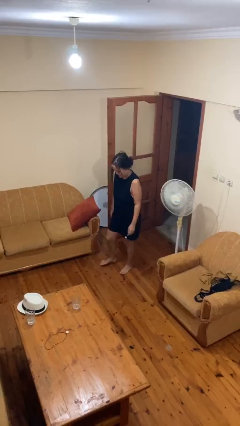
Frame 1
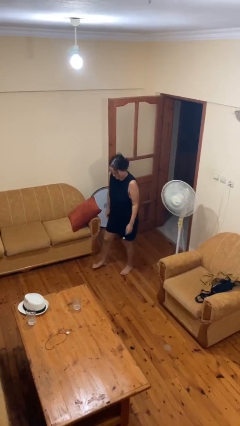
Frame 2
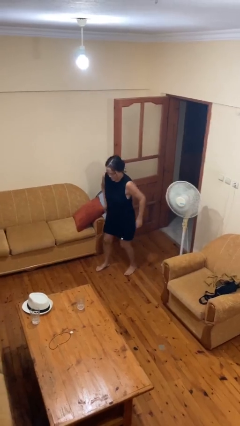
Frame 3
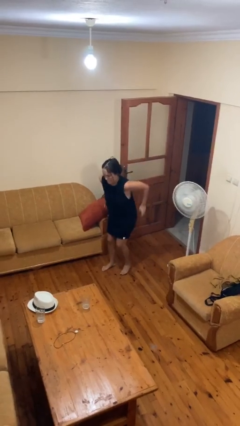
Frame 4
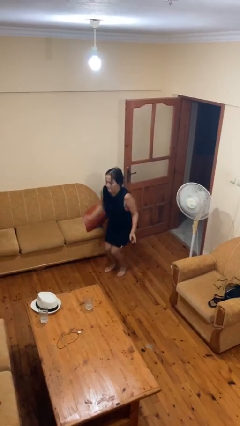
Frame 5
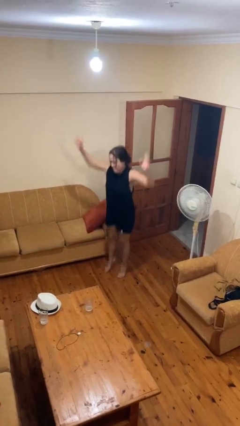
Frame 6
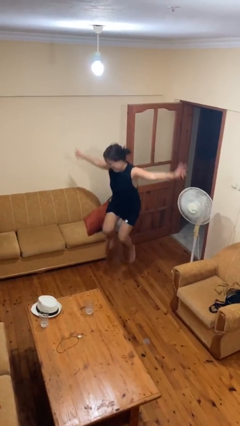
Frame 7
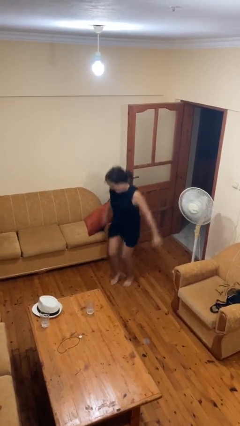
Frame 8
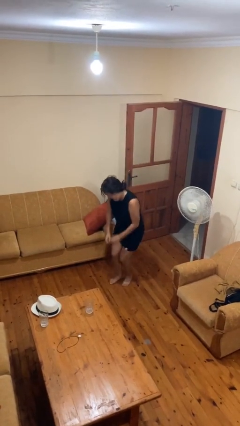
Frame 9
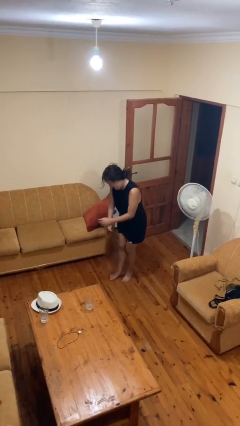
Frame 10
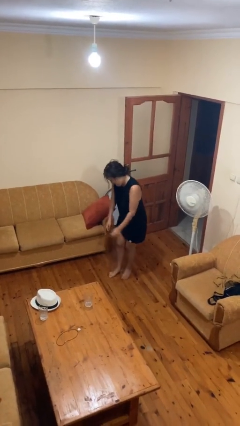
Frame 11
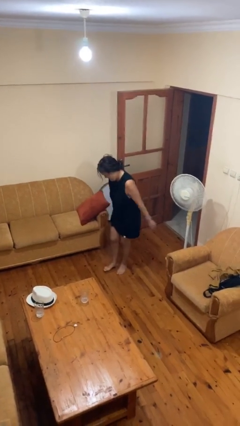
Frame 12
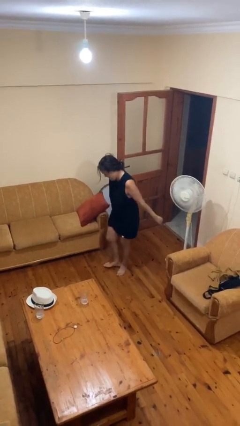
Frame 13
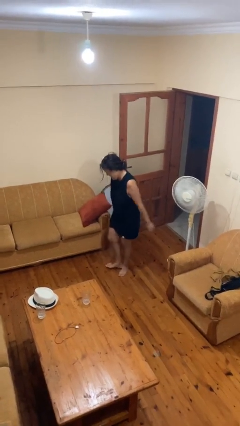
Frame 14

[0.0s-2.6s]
person jumps

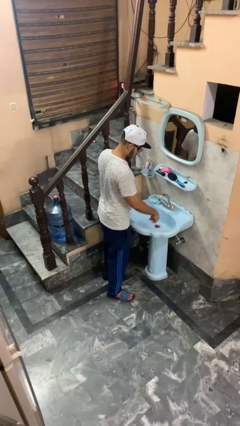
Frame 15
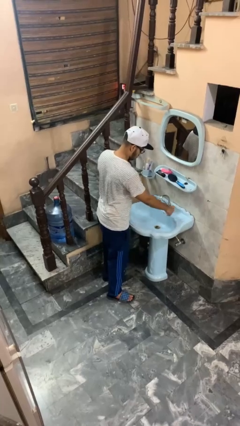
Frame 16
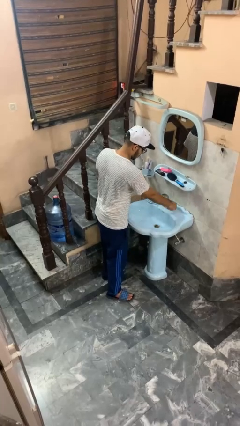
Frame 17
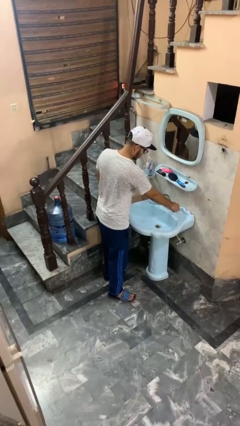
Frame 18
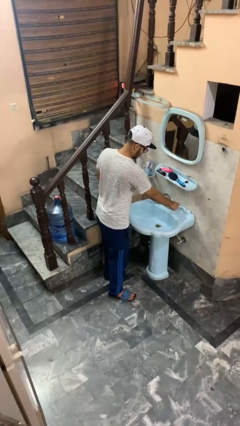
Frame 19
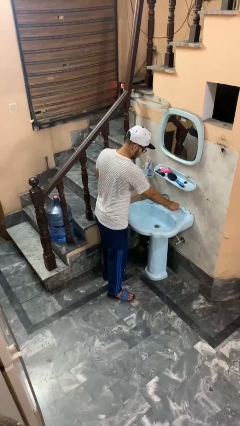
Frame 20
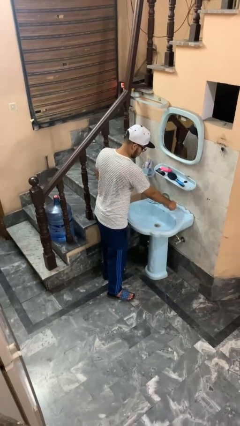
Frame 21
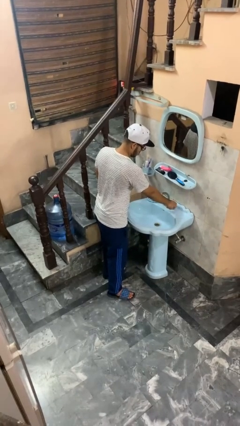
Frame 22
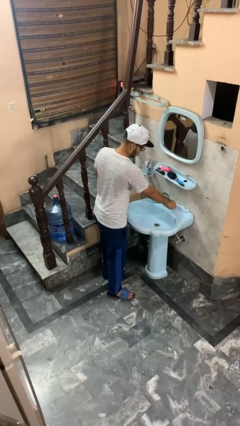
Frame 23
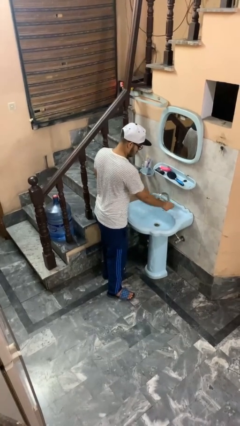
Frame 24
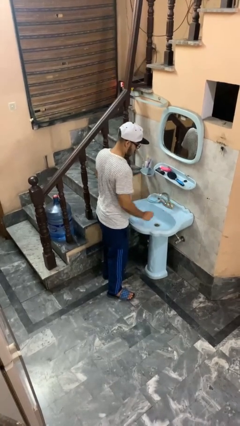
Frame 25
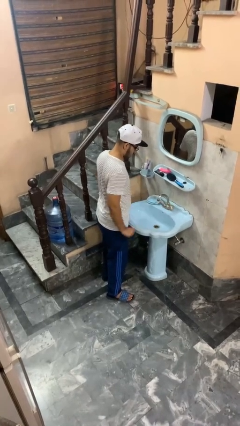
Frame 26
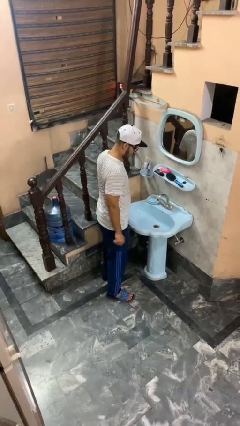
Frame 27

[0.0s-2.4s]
person turns off faucet

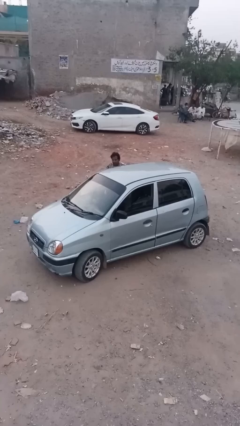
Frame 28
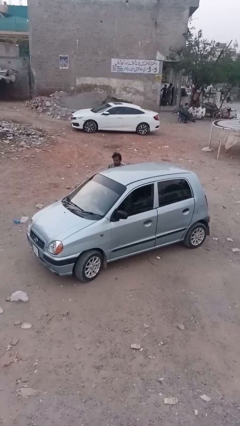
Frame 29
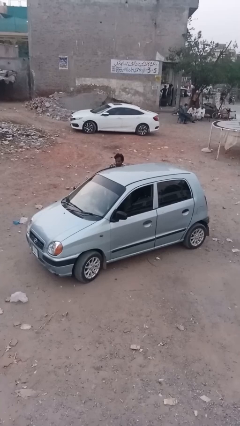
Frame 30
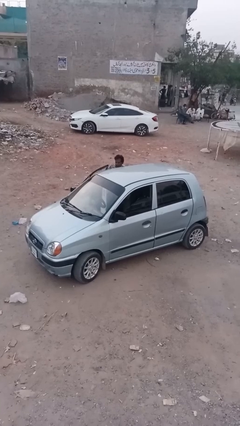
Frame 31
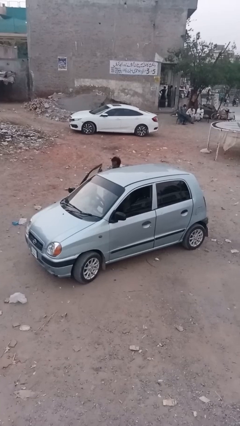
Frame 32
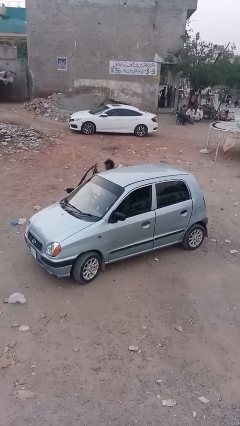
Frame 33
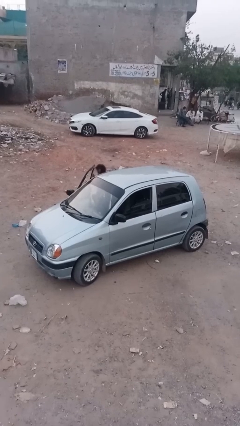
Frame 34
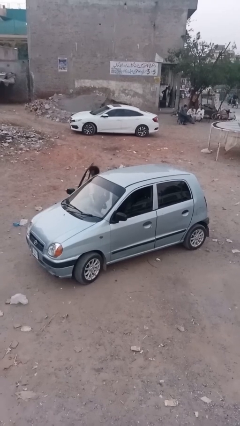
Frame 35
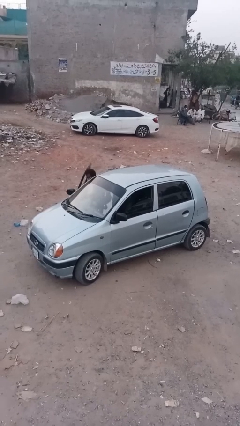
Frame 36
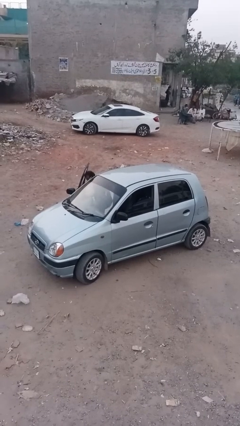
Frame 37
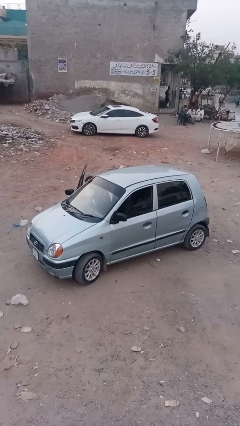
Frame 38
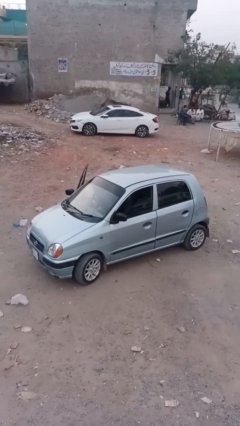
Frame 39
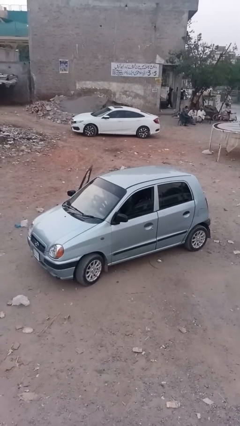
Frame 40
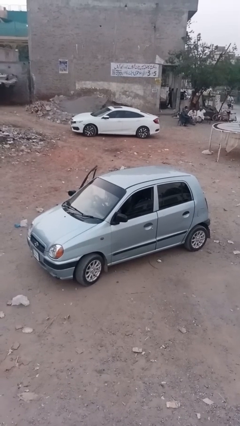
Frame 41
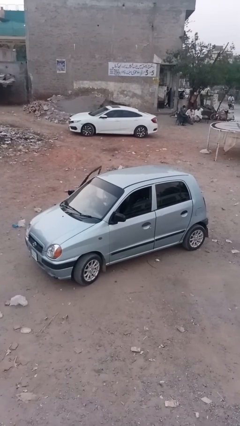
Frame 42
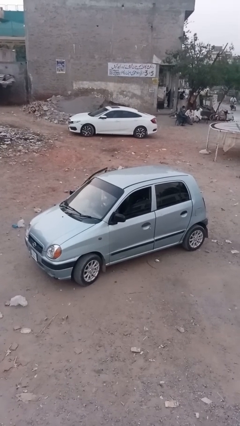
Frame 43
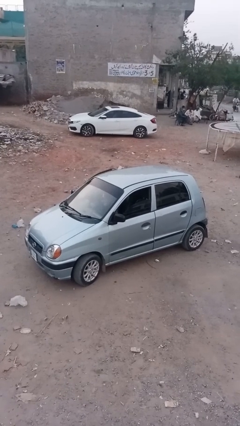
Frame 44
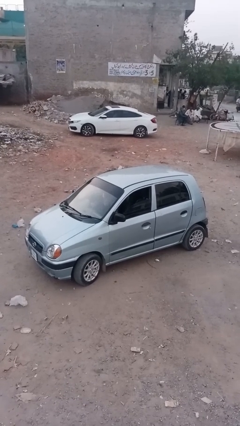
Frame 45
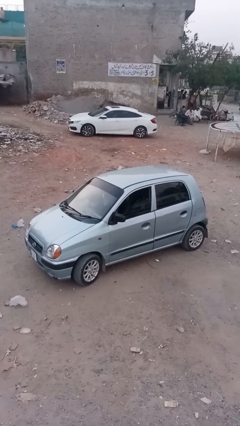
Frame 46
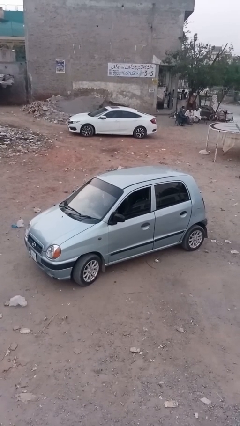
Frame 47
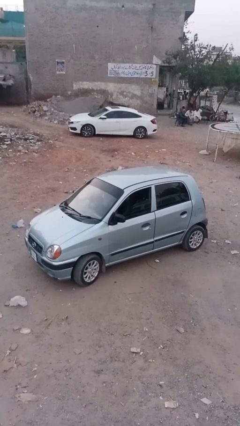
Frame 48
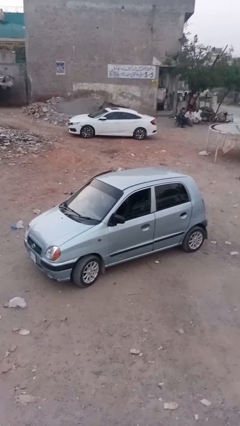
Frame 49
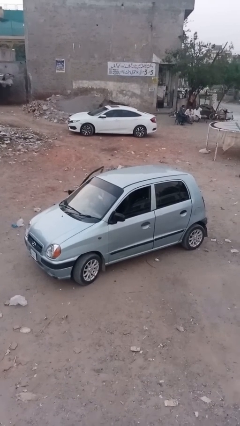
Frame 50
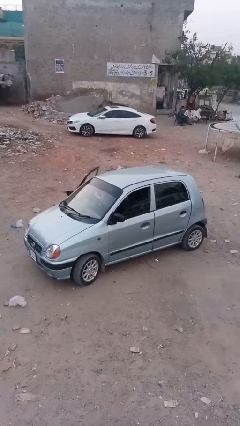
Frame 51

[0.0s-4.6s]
car picks up person

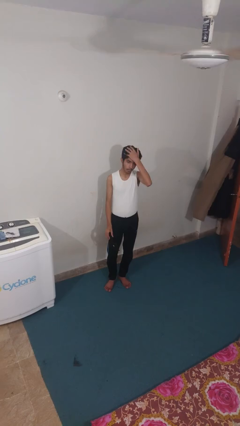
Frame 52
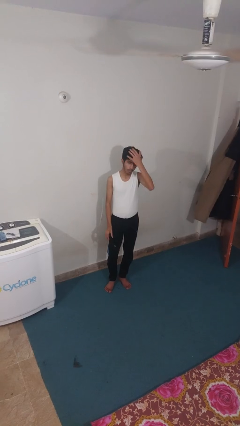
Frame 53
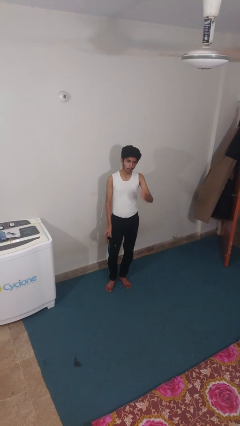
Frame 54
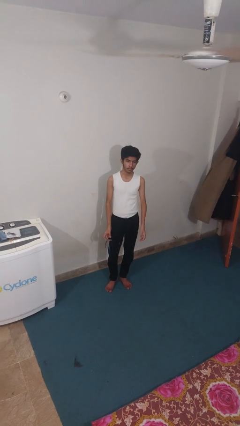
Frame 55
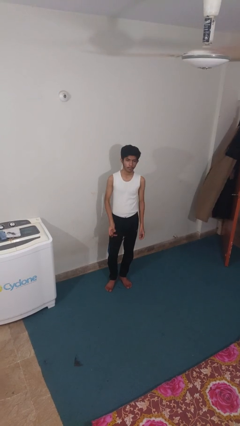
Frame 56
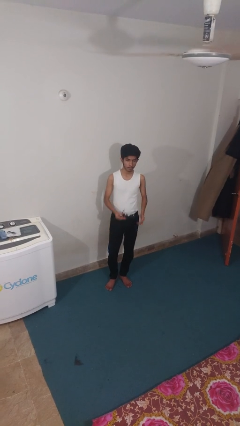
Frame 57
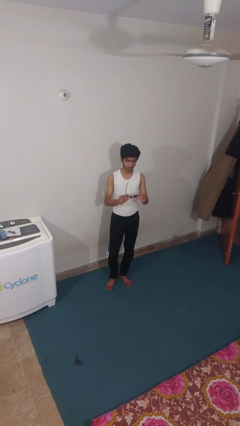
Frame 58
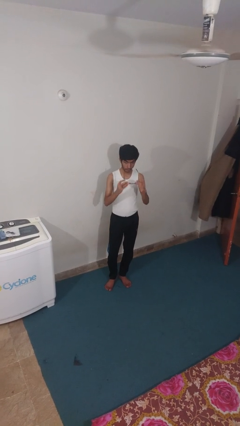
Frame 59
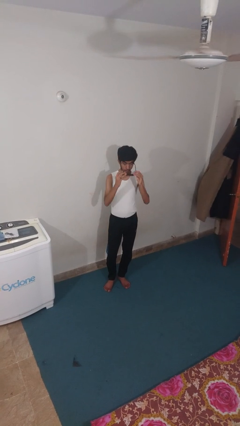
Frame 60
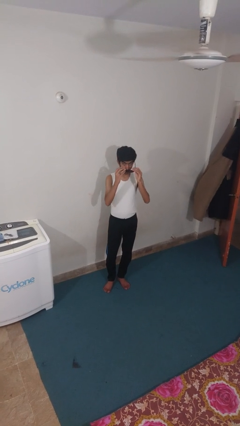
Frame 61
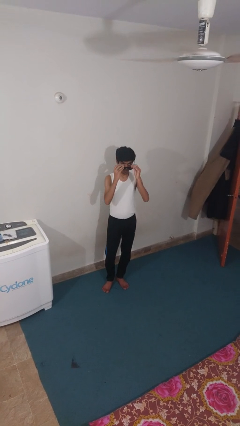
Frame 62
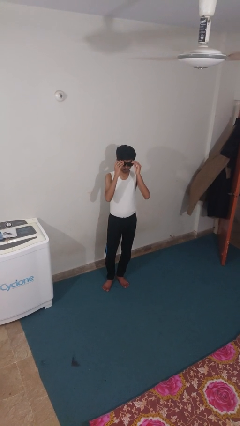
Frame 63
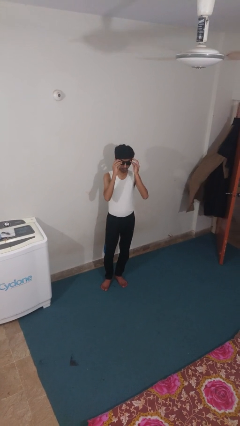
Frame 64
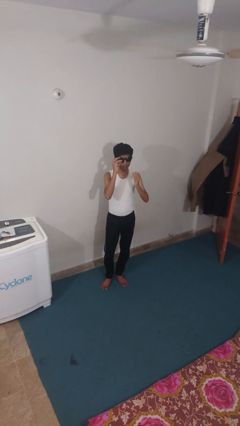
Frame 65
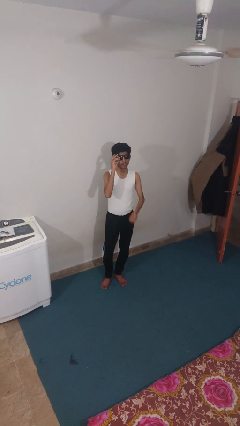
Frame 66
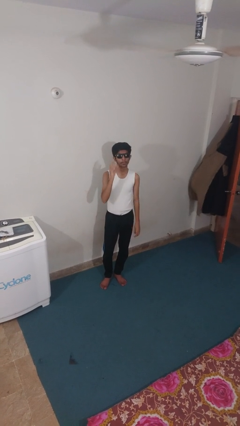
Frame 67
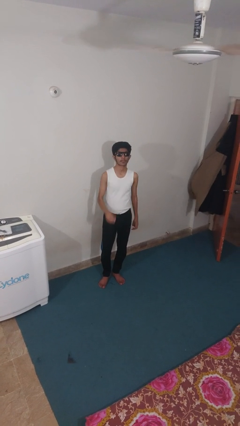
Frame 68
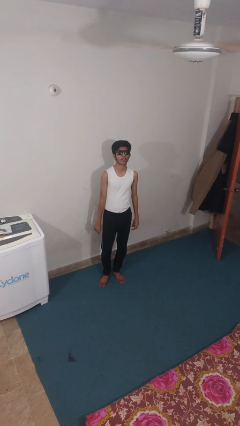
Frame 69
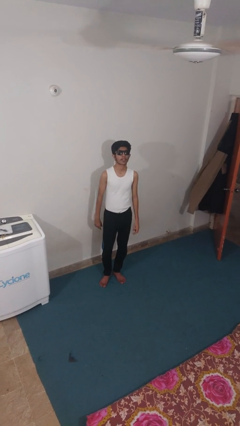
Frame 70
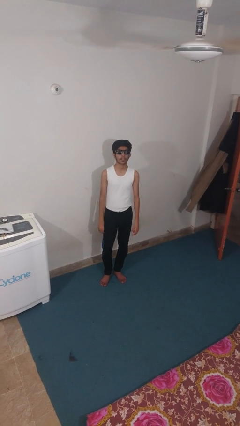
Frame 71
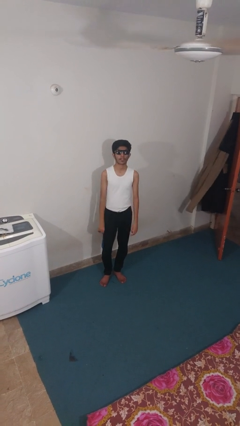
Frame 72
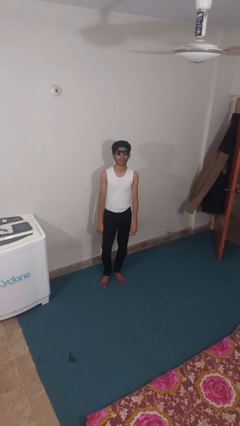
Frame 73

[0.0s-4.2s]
person puts on sunglasses

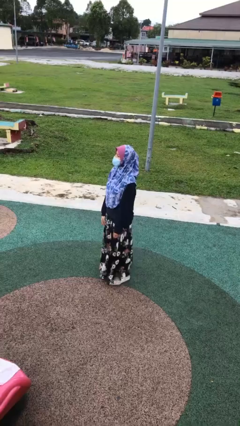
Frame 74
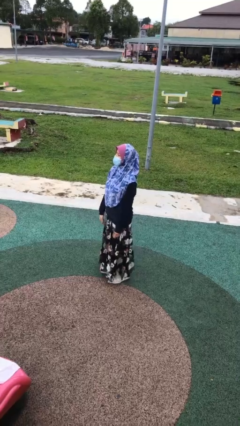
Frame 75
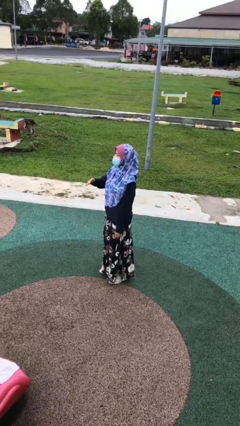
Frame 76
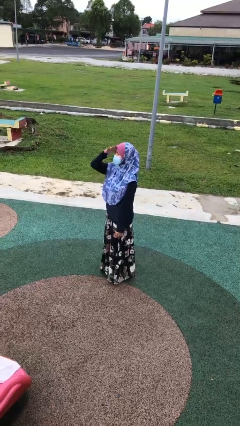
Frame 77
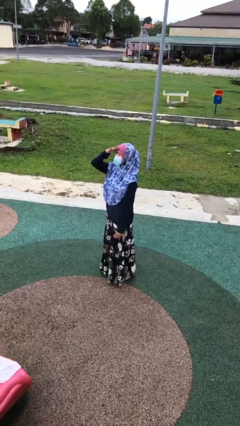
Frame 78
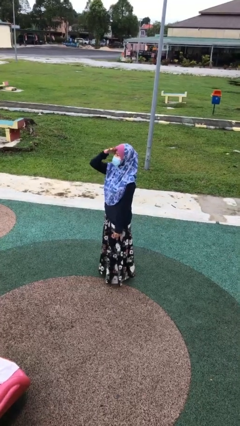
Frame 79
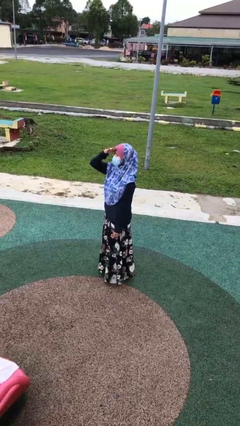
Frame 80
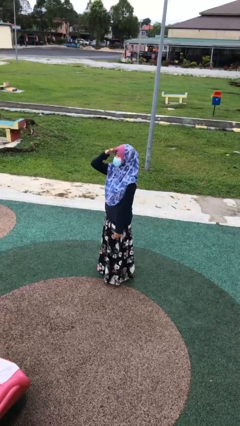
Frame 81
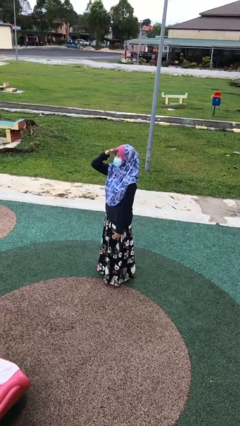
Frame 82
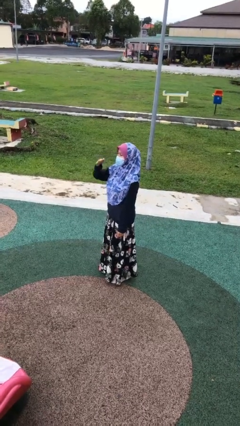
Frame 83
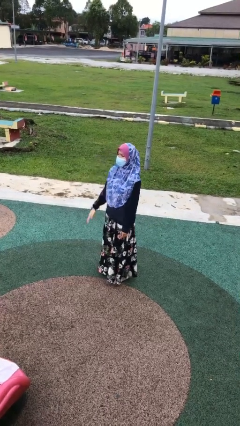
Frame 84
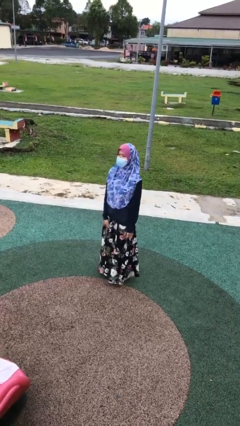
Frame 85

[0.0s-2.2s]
person salutes

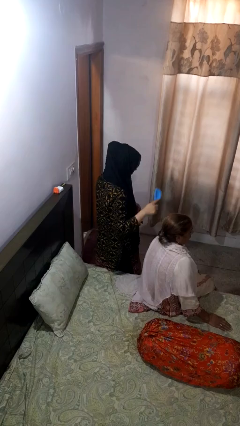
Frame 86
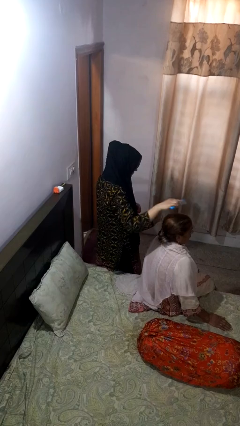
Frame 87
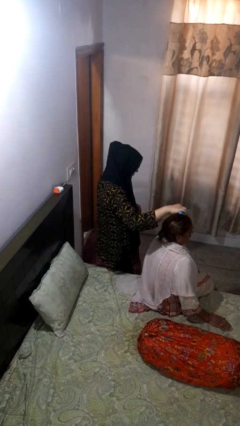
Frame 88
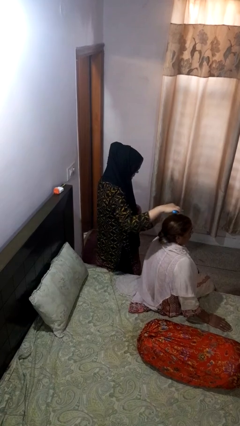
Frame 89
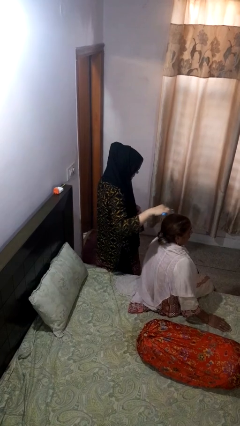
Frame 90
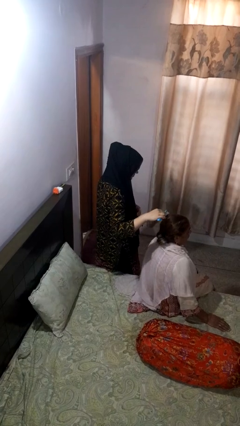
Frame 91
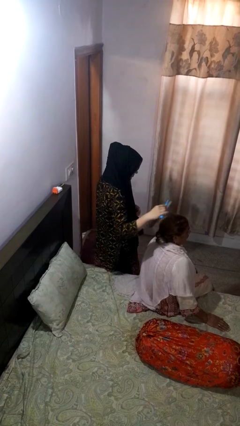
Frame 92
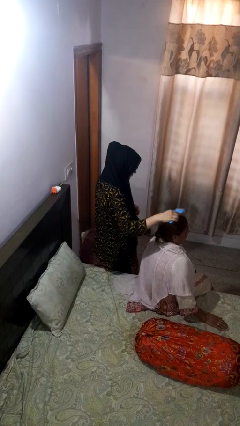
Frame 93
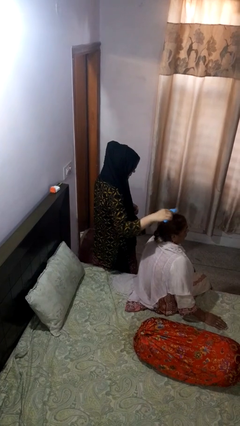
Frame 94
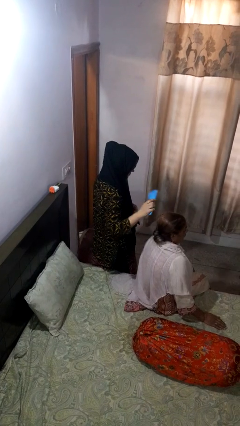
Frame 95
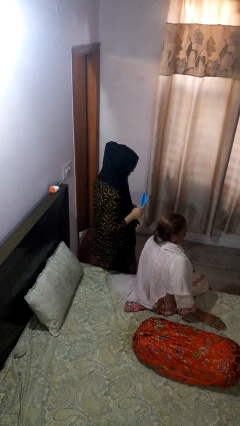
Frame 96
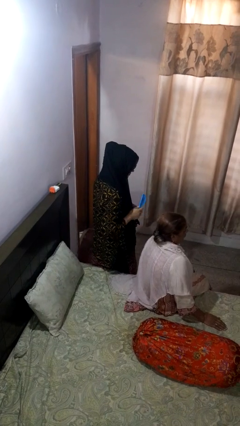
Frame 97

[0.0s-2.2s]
person brushes hair of person
